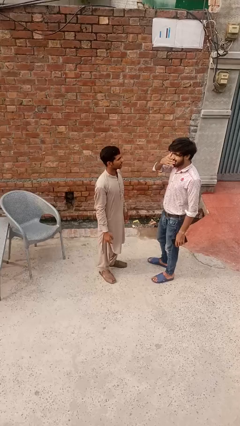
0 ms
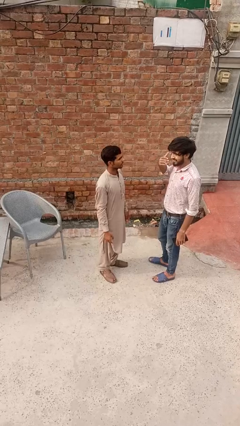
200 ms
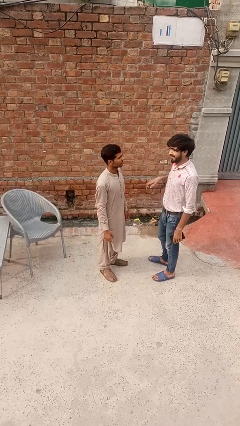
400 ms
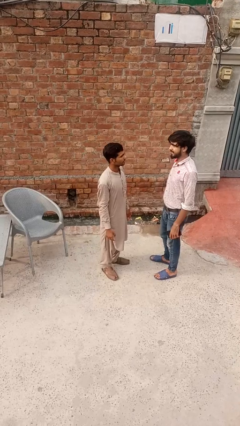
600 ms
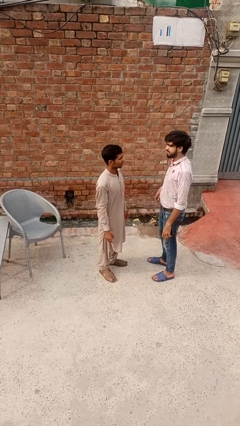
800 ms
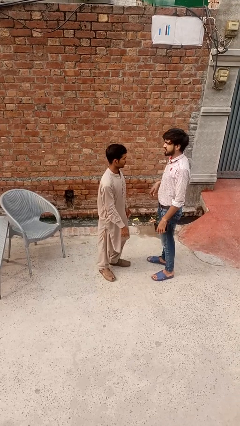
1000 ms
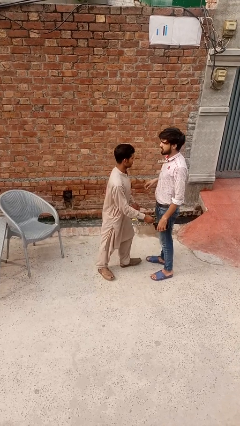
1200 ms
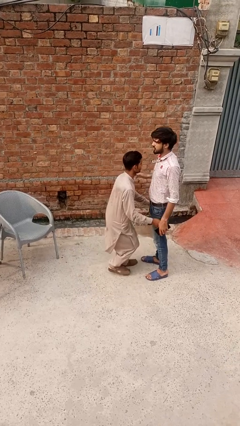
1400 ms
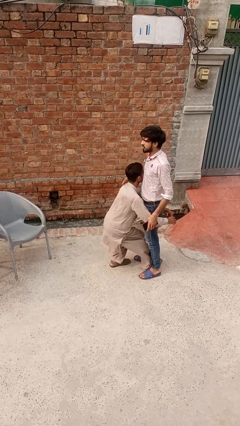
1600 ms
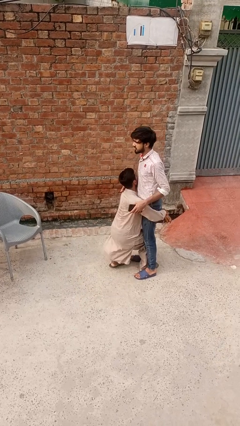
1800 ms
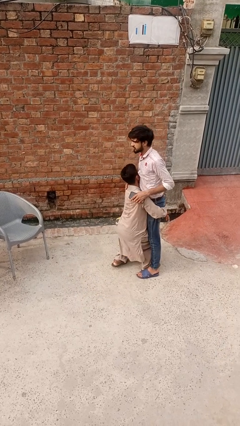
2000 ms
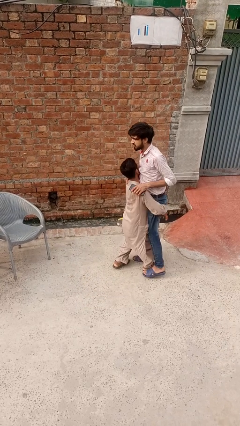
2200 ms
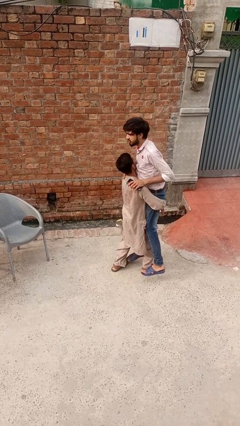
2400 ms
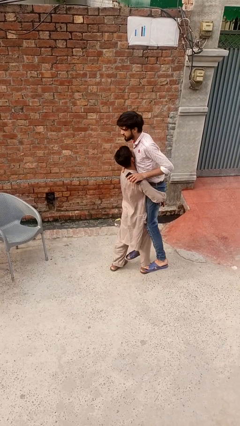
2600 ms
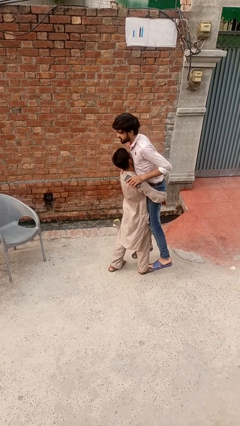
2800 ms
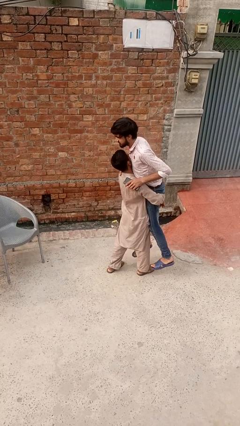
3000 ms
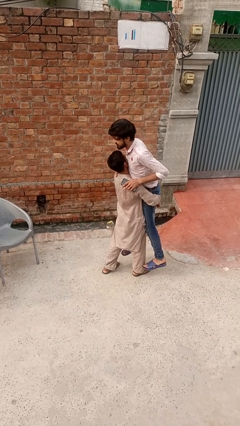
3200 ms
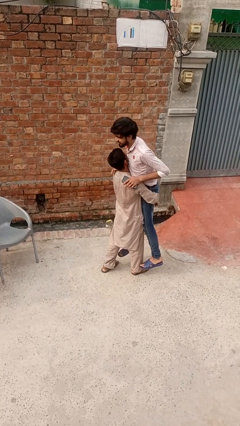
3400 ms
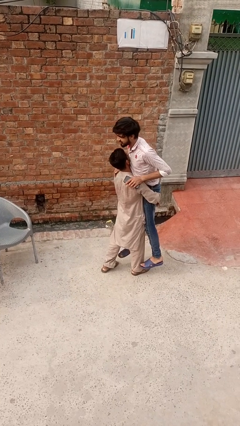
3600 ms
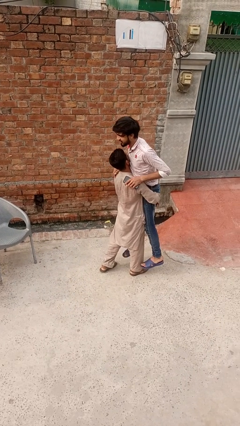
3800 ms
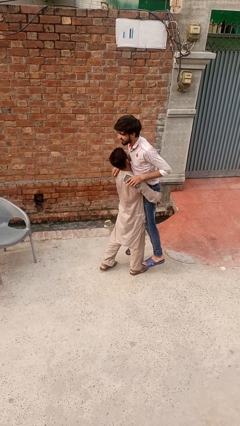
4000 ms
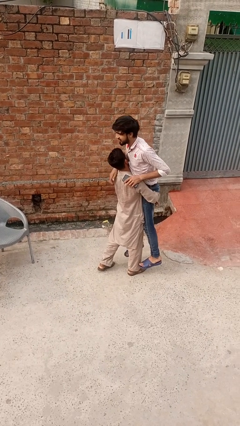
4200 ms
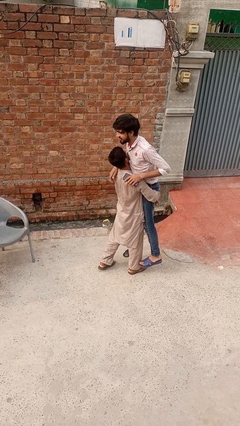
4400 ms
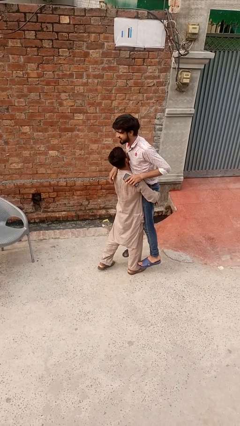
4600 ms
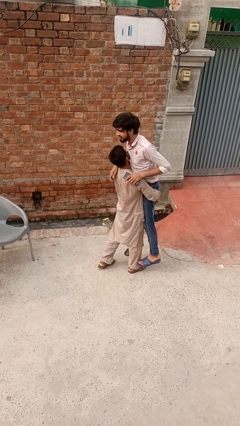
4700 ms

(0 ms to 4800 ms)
person picks up person

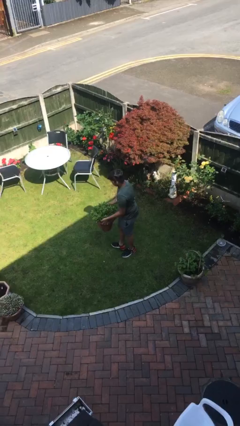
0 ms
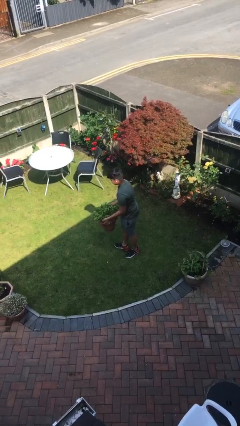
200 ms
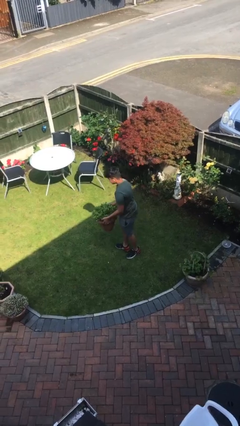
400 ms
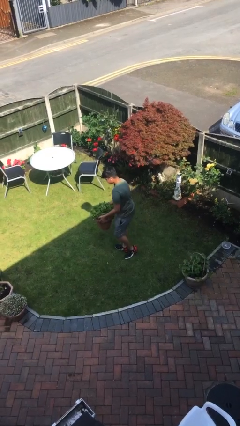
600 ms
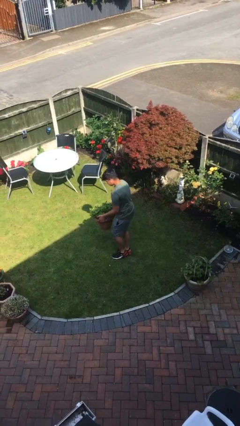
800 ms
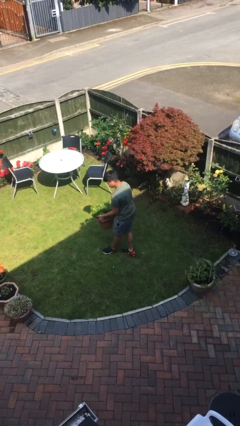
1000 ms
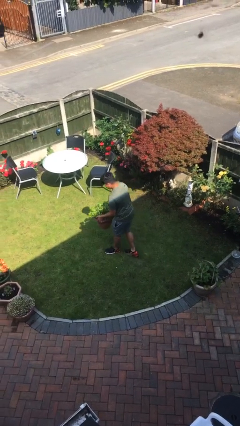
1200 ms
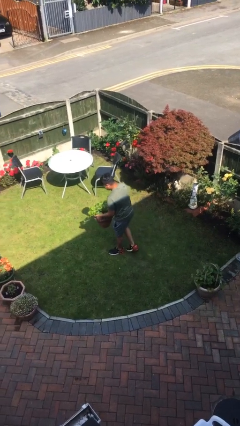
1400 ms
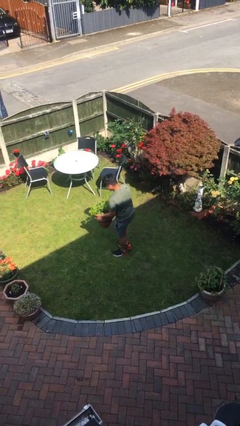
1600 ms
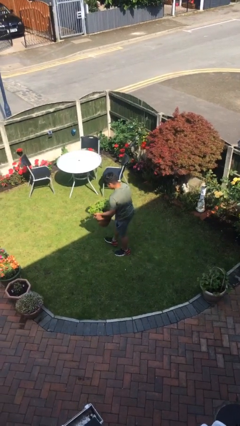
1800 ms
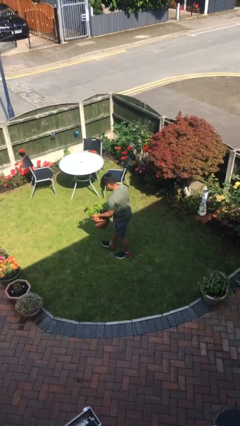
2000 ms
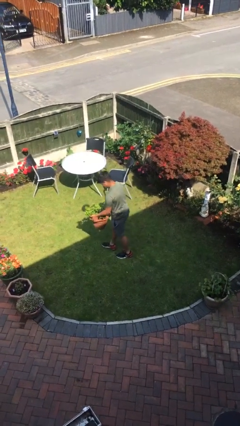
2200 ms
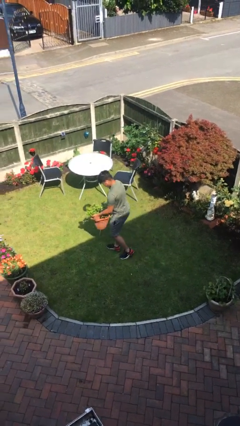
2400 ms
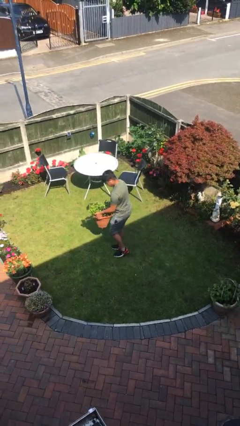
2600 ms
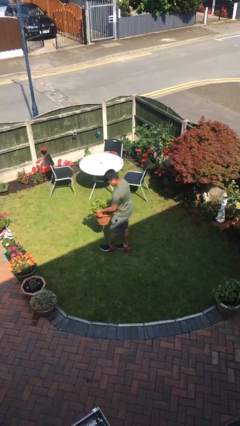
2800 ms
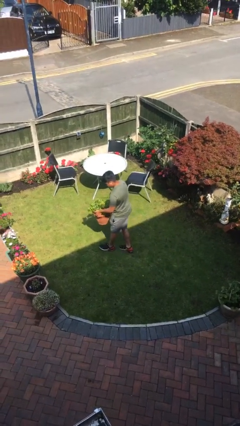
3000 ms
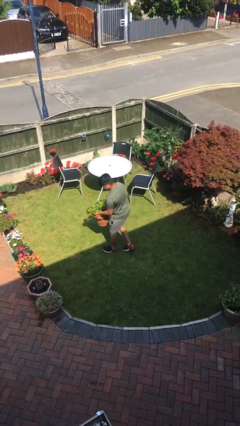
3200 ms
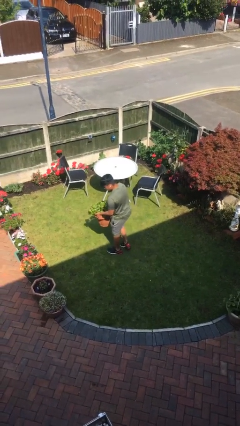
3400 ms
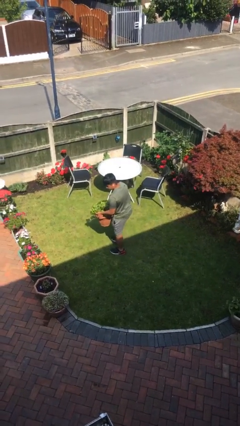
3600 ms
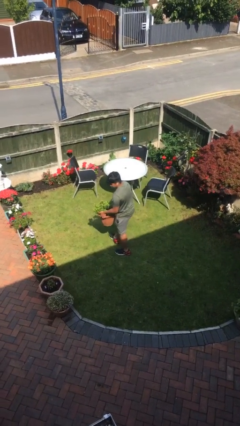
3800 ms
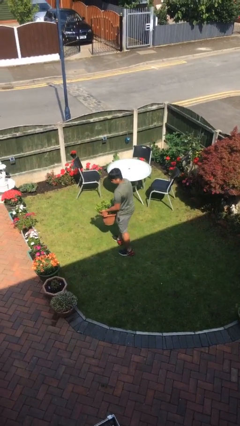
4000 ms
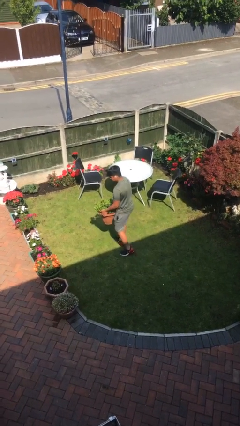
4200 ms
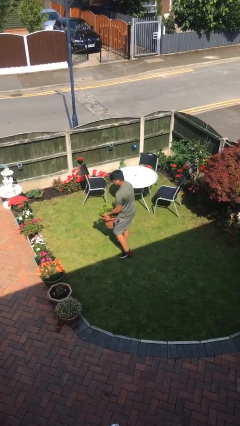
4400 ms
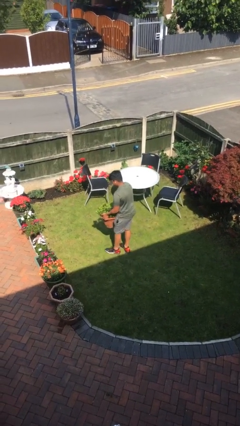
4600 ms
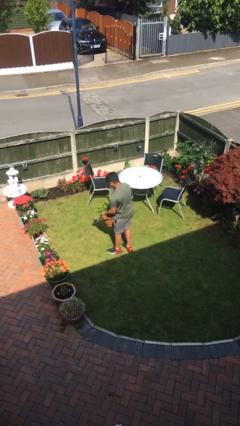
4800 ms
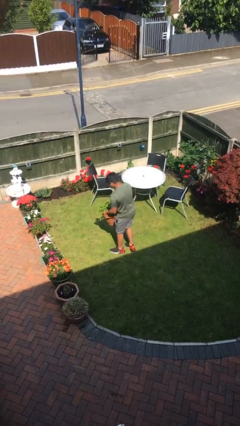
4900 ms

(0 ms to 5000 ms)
person carries heavy object

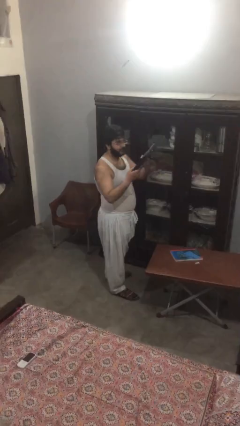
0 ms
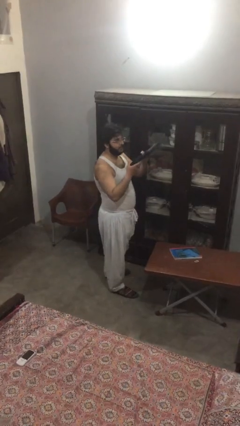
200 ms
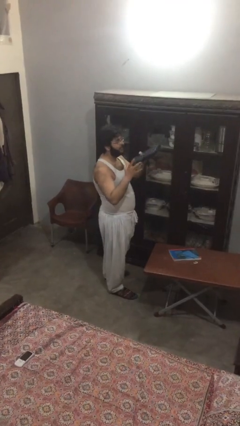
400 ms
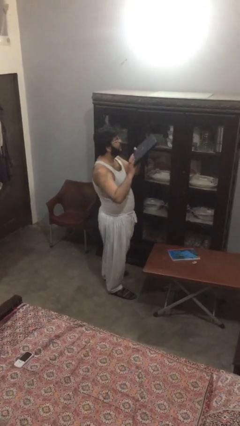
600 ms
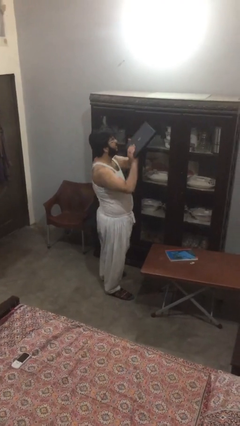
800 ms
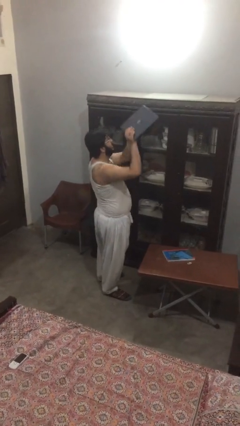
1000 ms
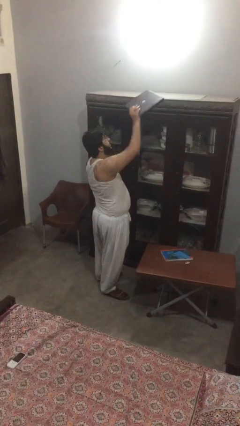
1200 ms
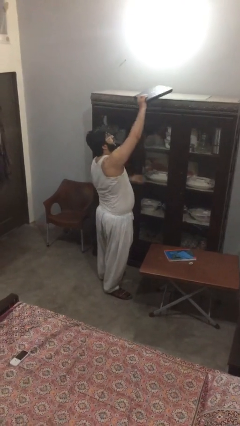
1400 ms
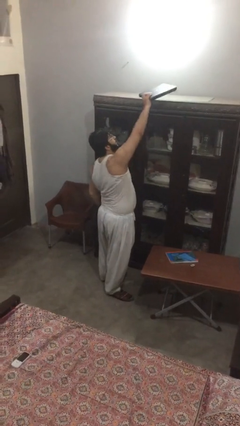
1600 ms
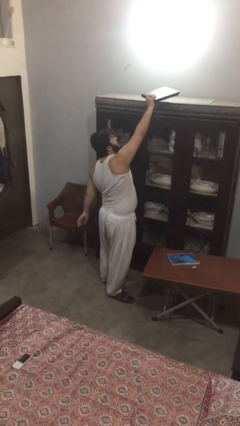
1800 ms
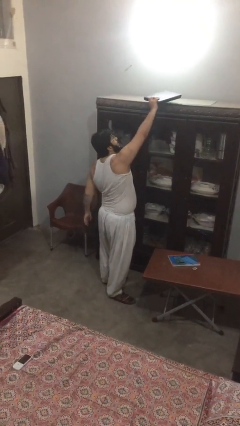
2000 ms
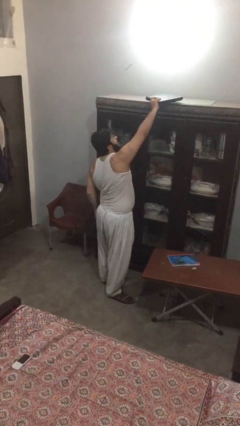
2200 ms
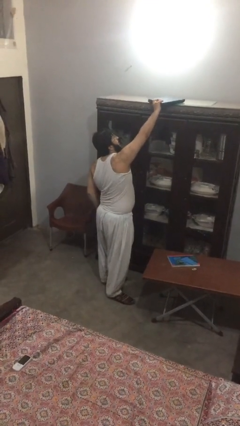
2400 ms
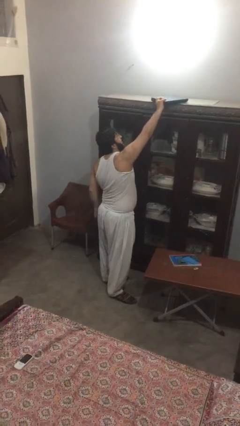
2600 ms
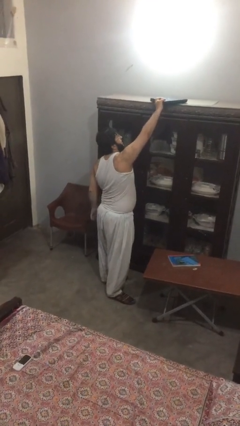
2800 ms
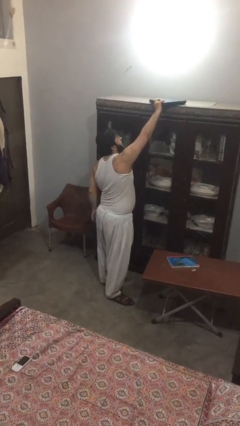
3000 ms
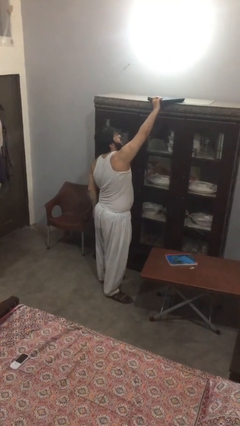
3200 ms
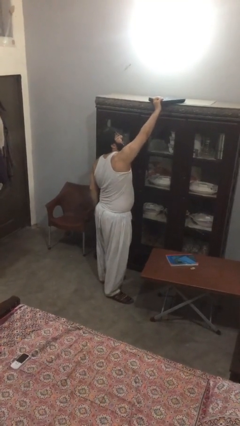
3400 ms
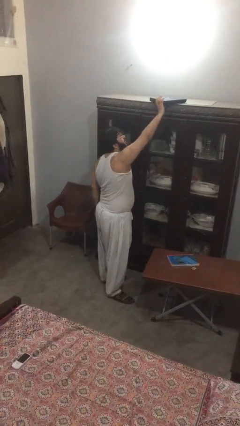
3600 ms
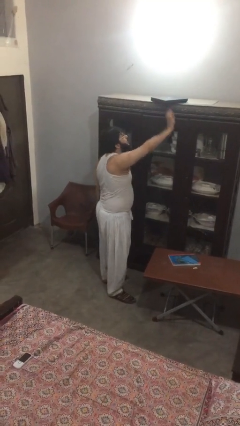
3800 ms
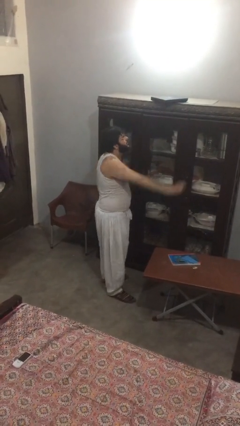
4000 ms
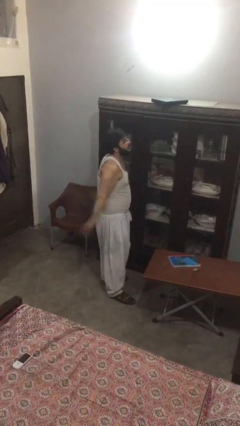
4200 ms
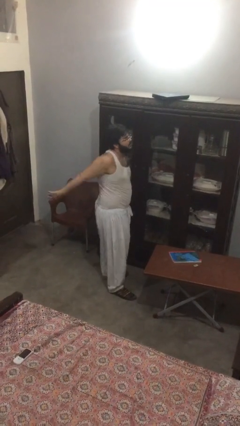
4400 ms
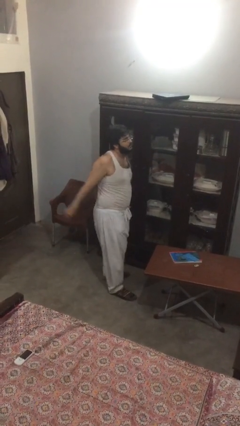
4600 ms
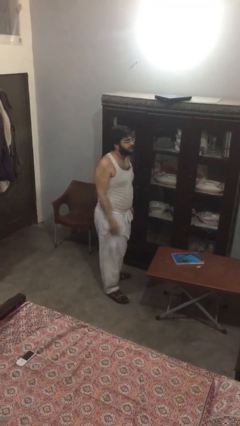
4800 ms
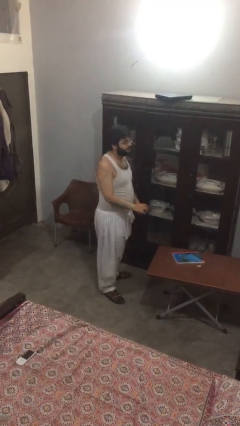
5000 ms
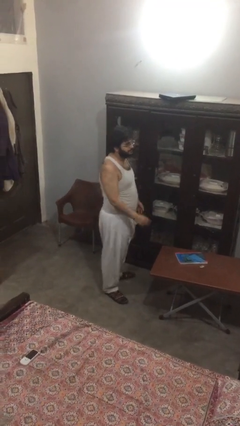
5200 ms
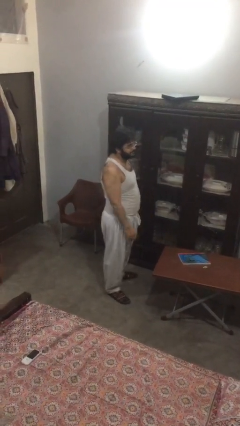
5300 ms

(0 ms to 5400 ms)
person puts down object on shelf

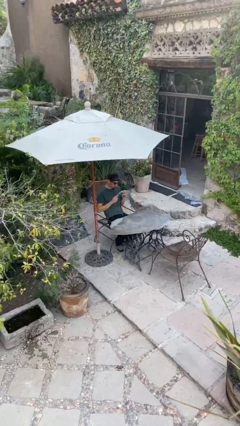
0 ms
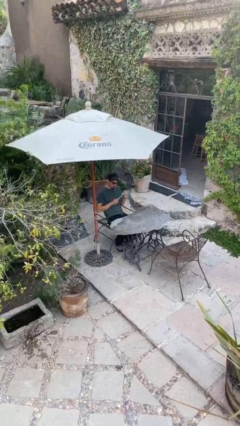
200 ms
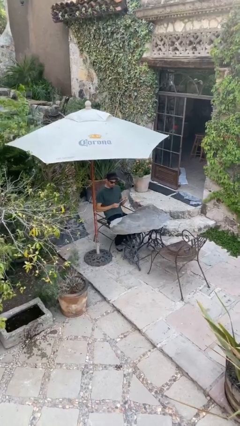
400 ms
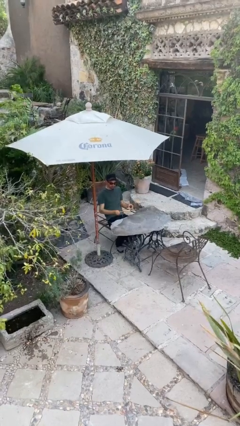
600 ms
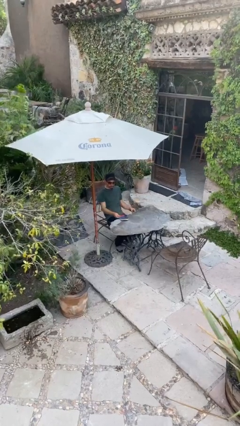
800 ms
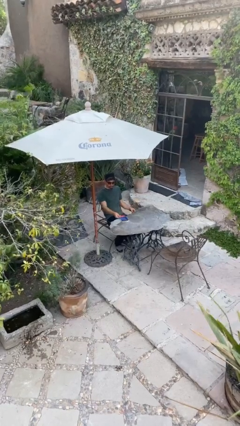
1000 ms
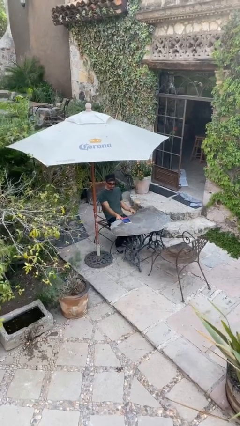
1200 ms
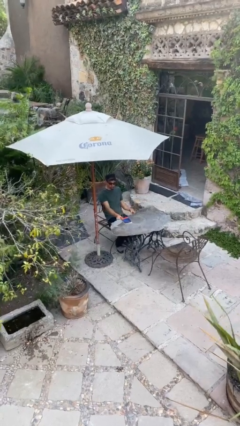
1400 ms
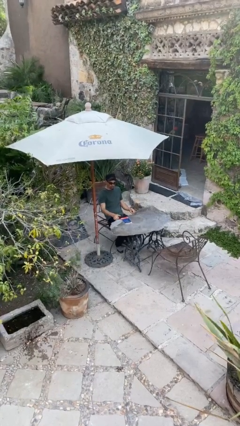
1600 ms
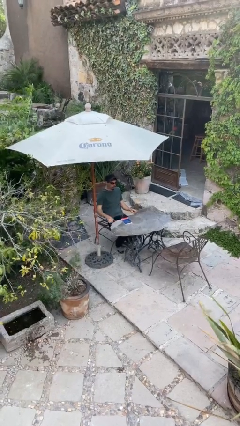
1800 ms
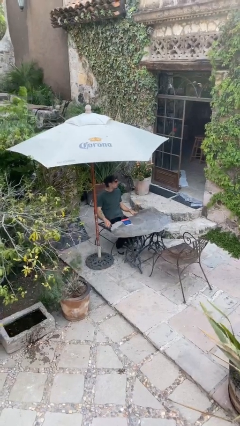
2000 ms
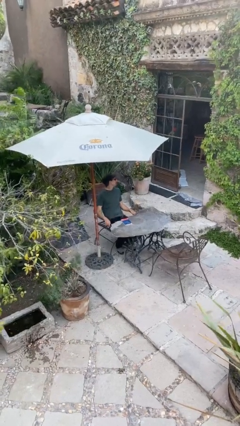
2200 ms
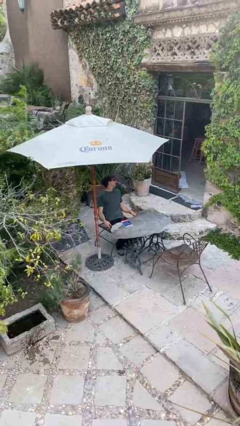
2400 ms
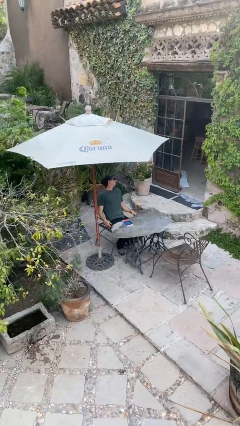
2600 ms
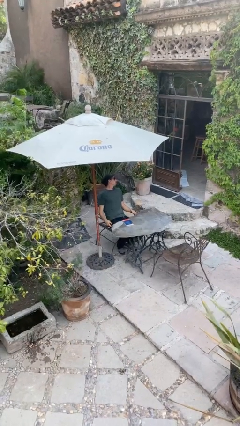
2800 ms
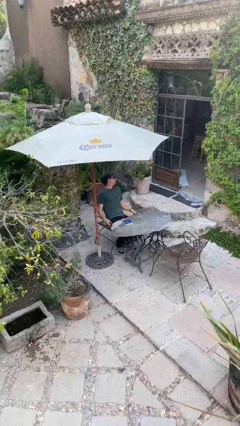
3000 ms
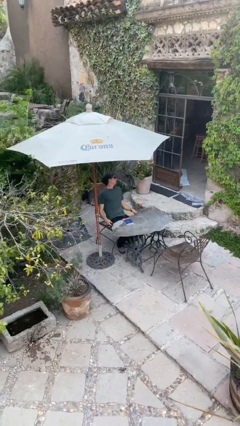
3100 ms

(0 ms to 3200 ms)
person puts down object on table
